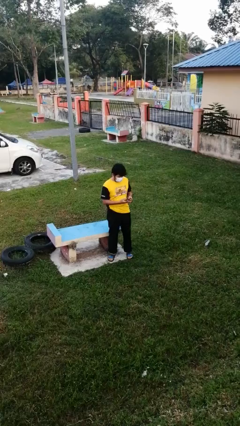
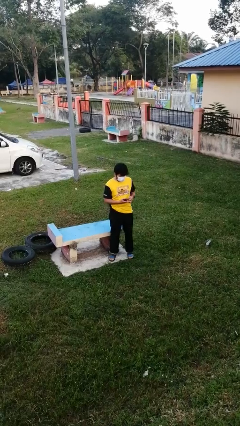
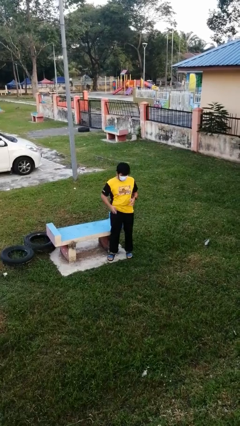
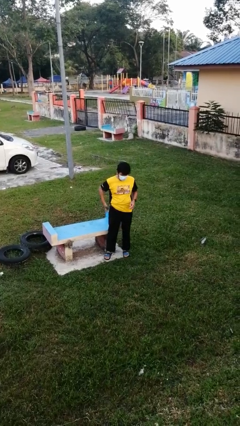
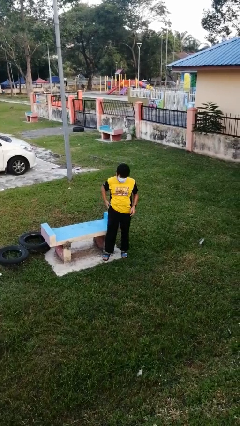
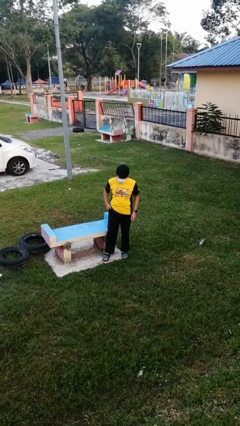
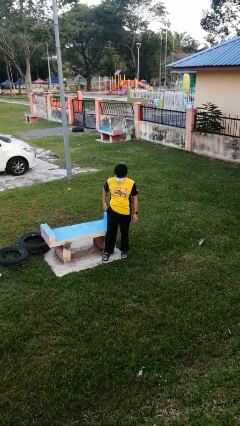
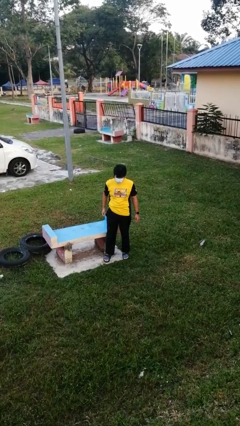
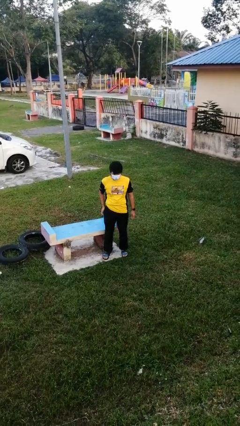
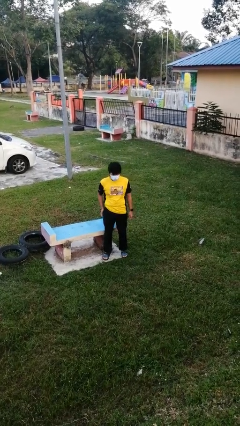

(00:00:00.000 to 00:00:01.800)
person puts phone into pocket

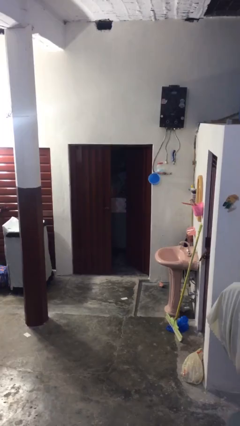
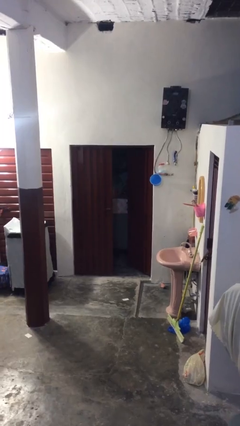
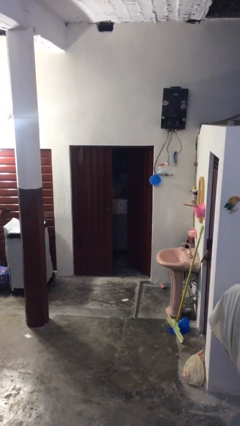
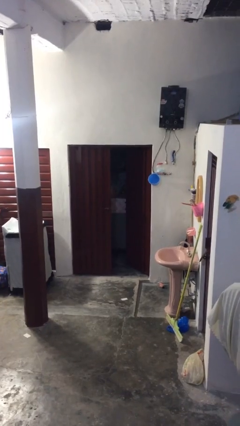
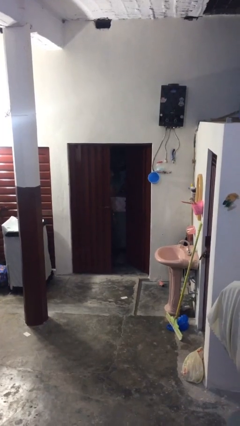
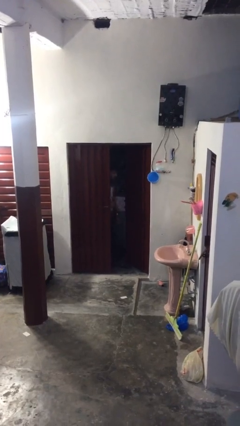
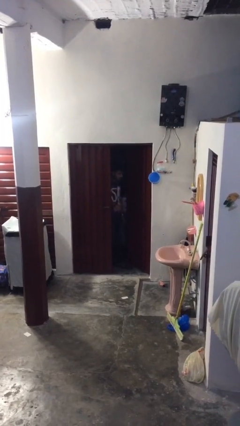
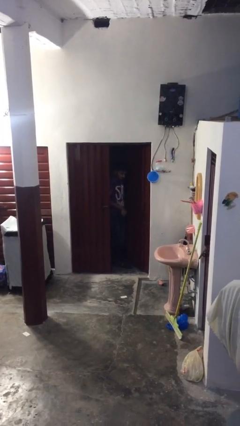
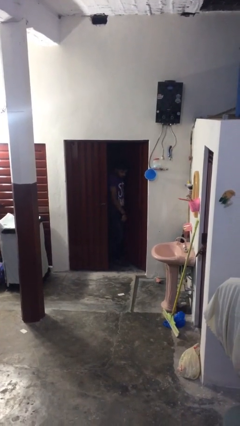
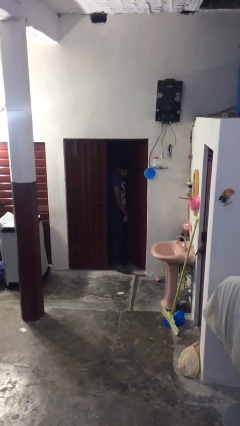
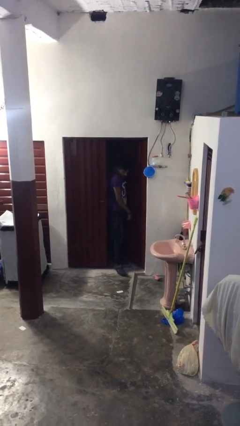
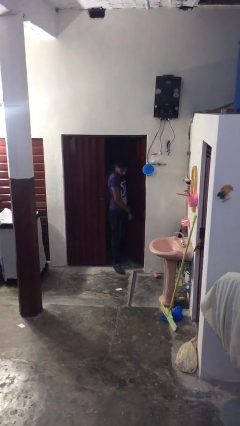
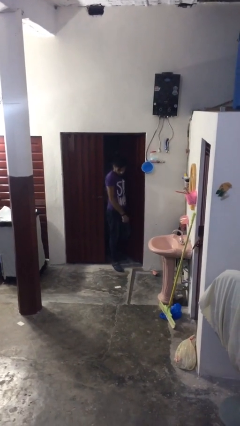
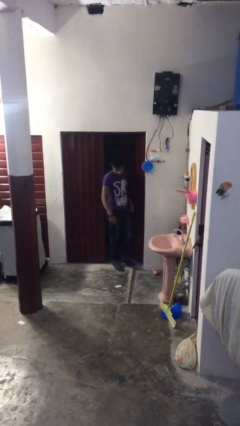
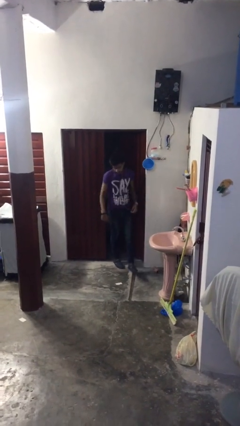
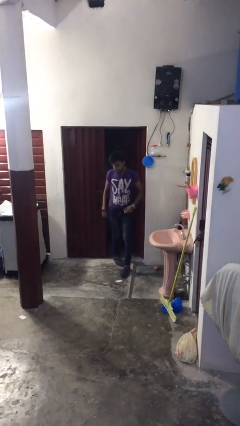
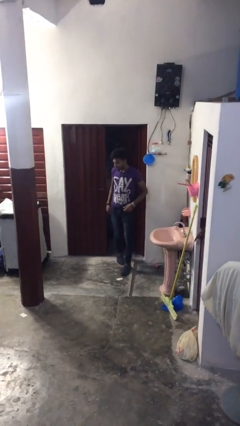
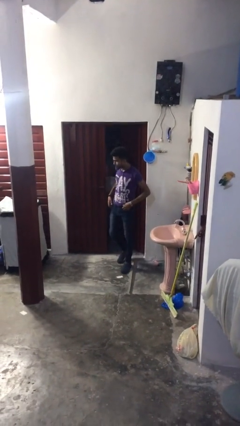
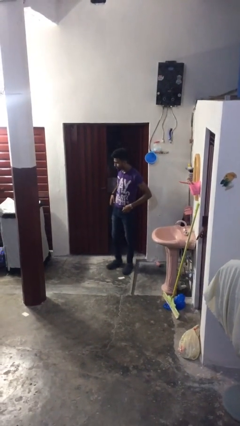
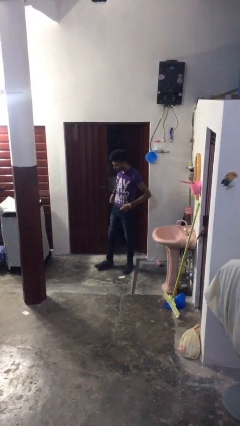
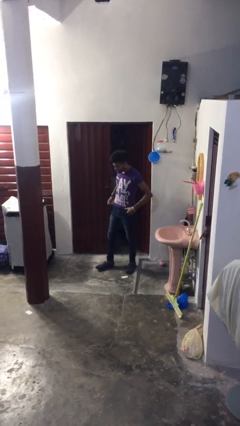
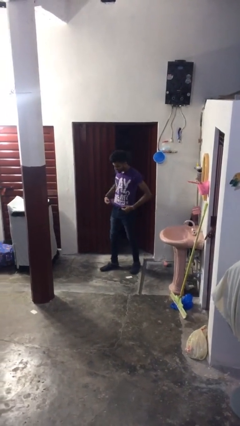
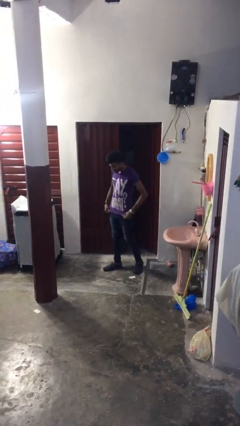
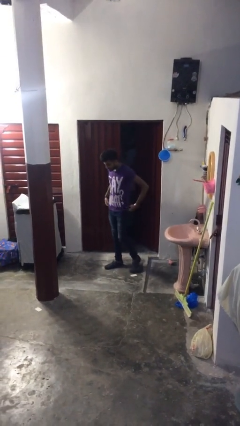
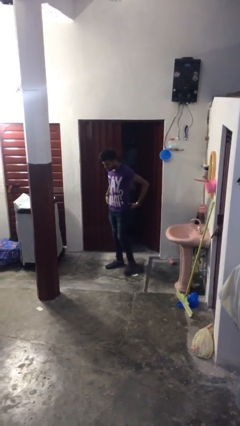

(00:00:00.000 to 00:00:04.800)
person enters scene through structure

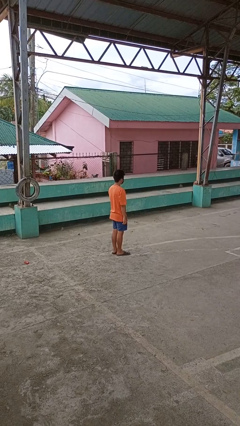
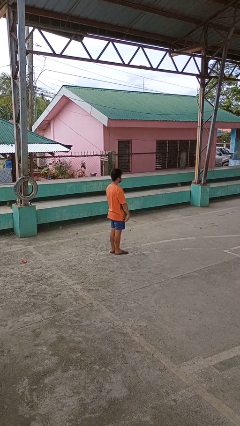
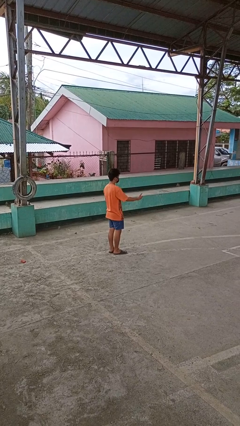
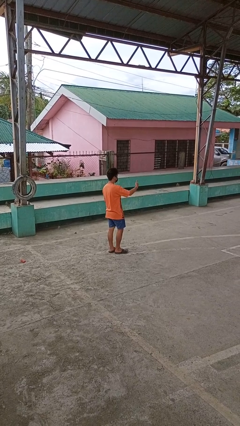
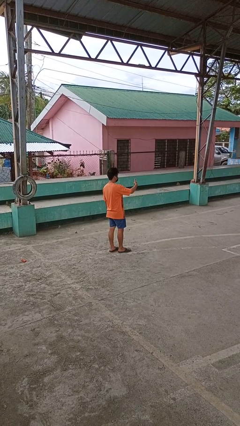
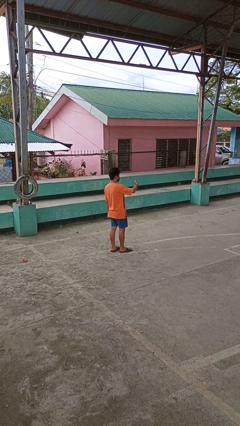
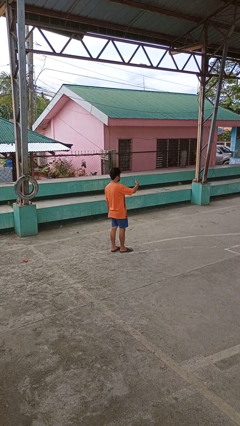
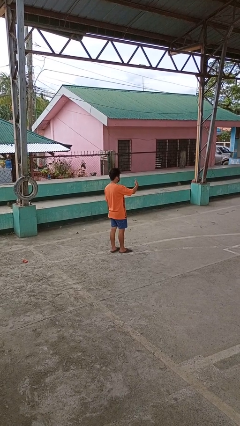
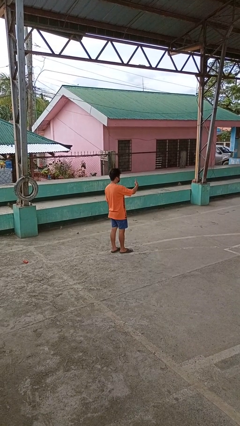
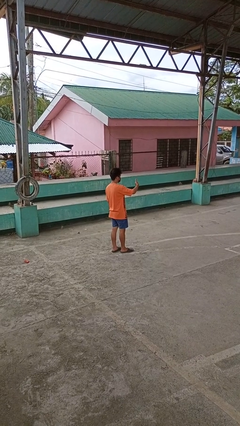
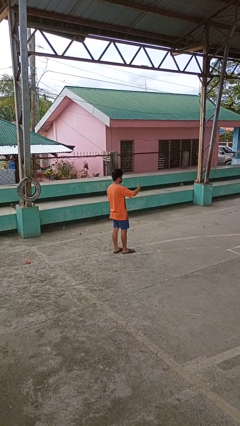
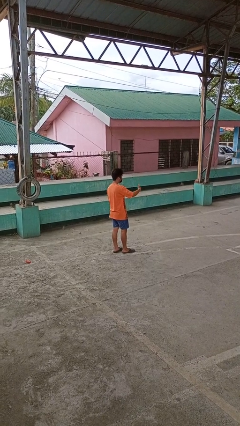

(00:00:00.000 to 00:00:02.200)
person gestures thumbs up

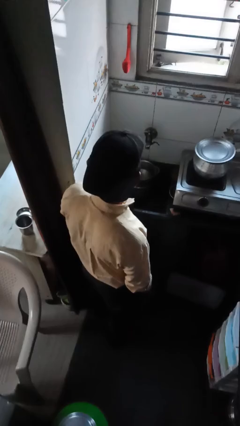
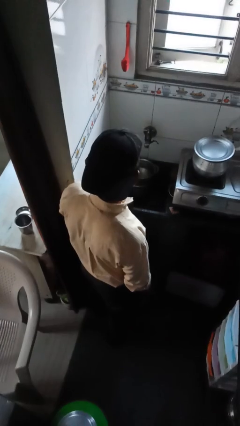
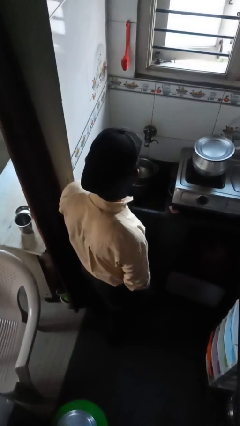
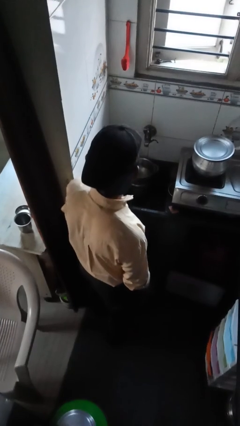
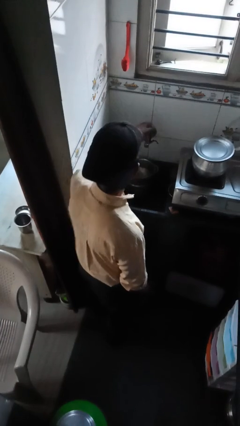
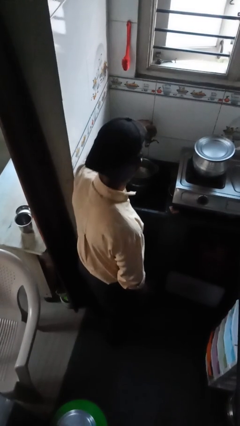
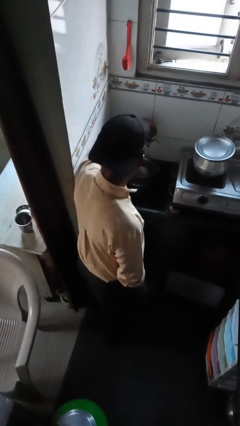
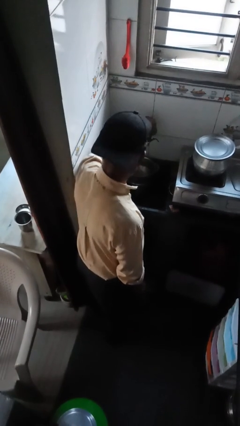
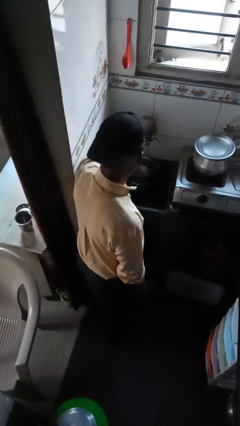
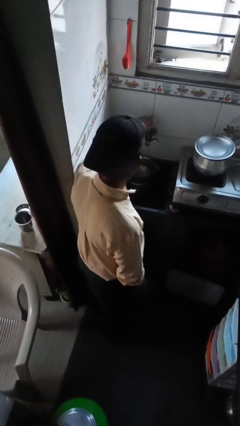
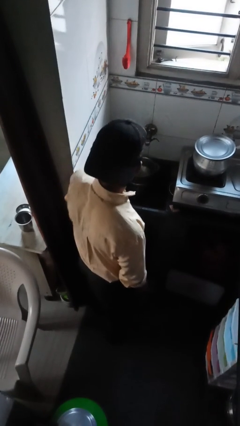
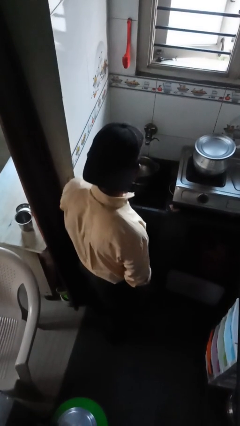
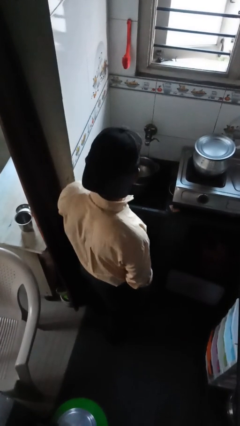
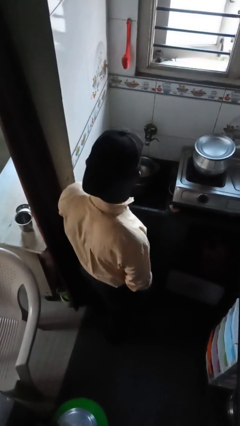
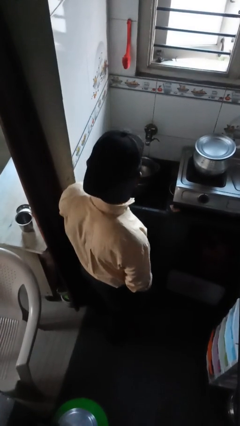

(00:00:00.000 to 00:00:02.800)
person turns on faucet

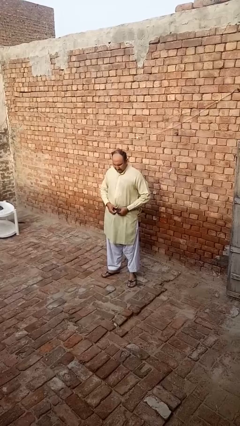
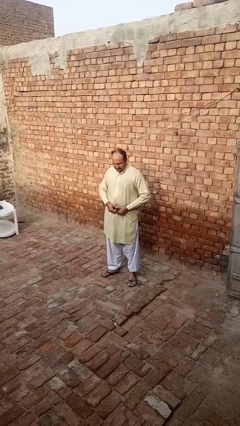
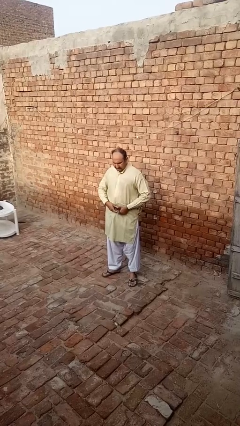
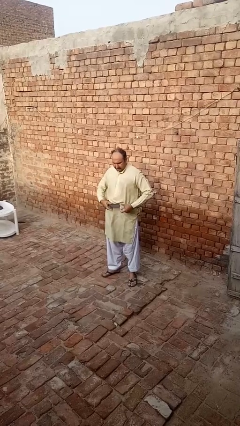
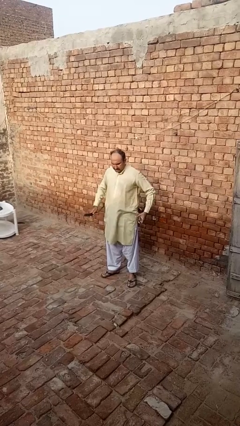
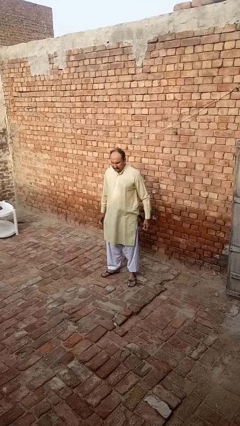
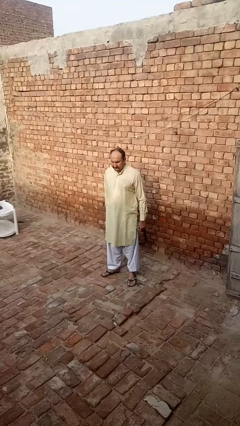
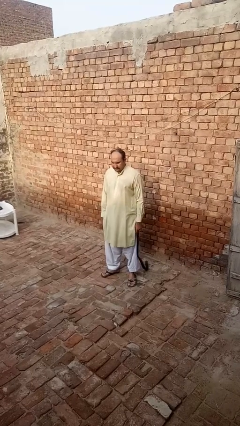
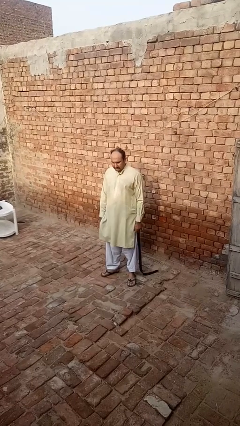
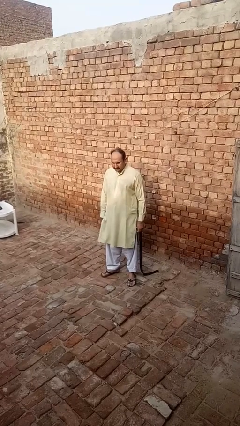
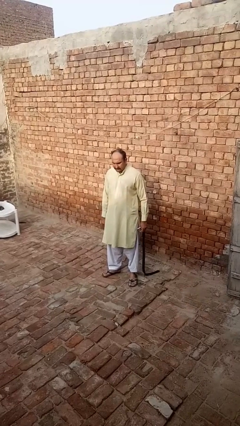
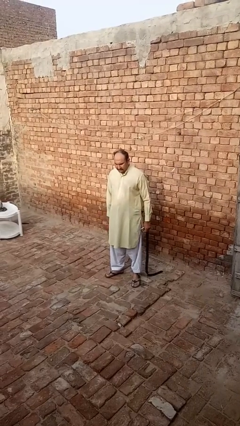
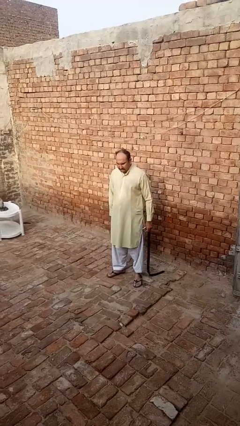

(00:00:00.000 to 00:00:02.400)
person takes off belt

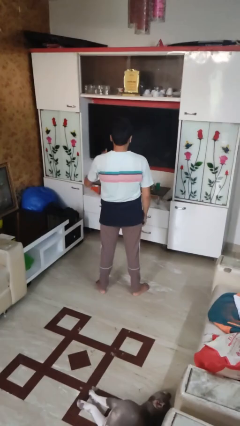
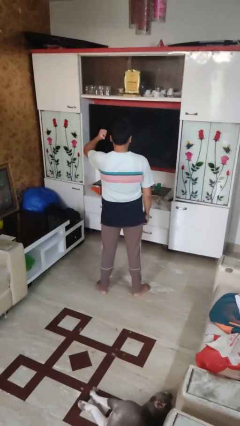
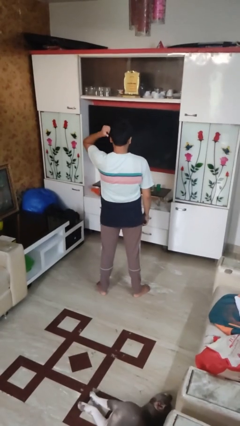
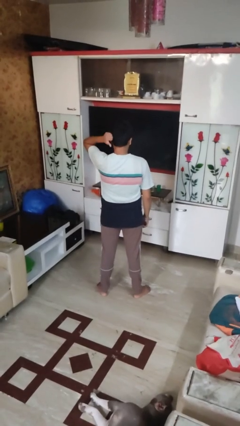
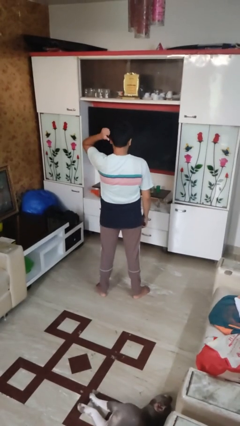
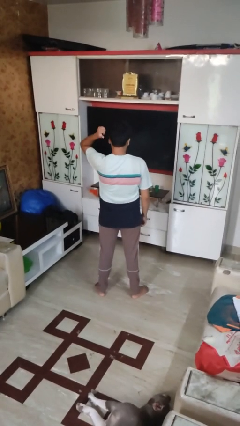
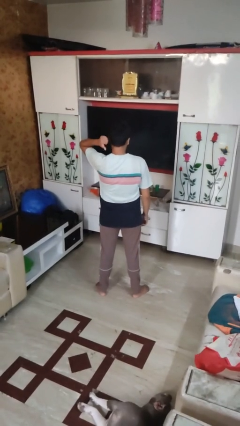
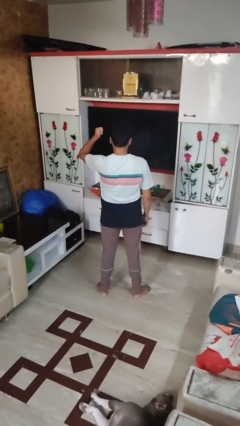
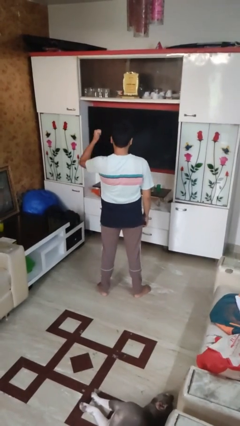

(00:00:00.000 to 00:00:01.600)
person gestures behind me

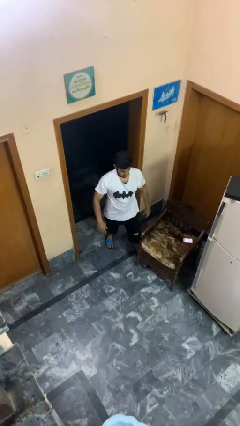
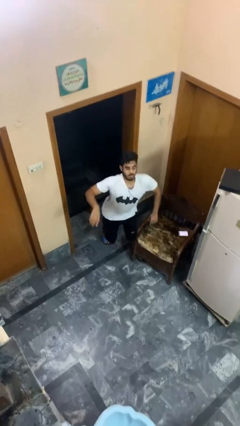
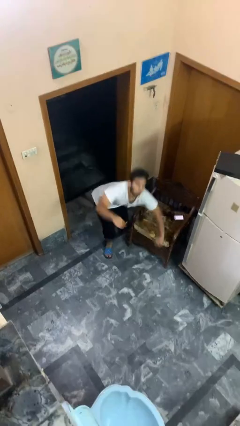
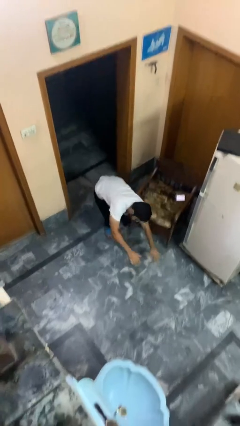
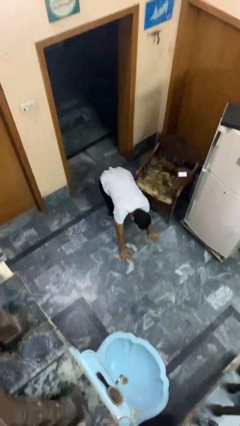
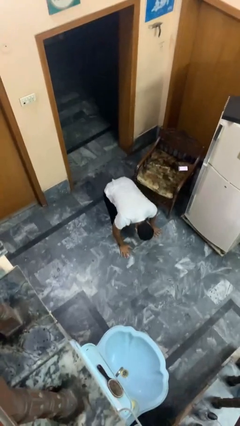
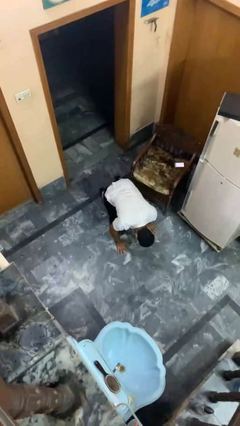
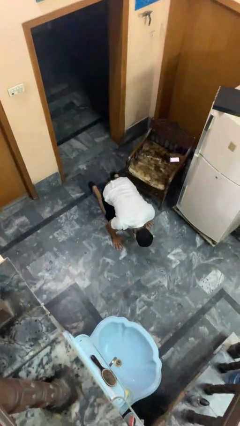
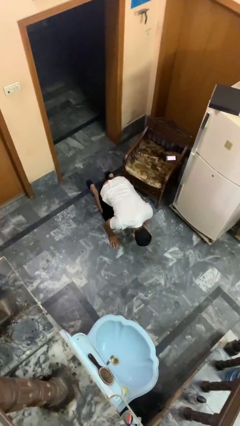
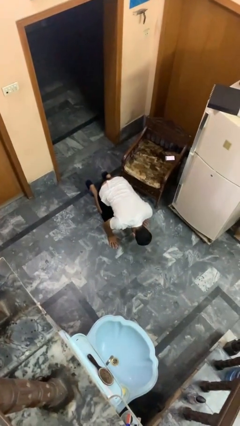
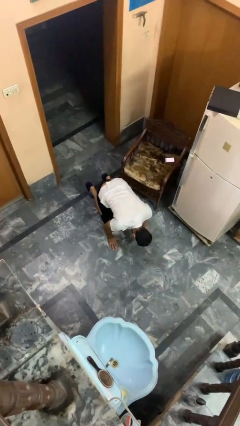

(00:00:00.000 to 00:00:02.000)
person trips on object on floor
